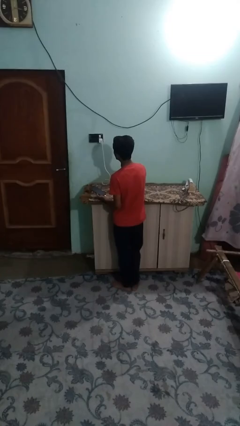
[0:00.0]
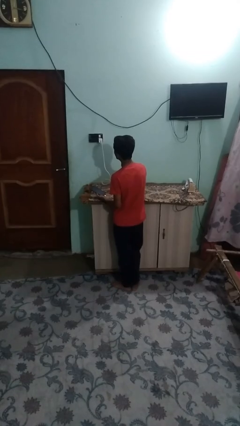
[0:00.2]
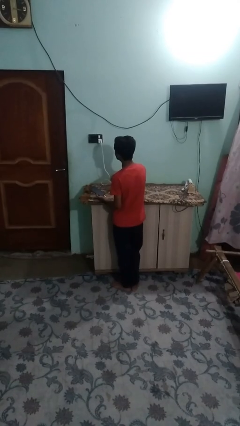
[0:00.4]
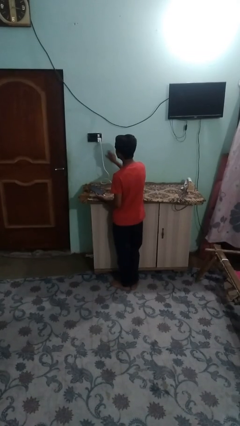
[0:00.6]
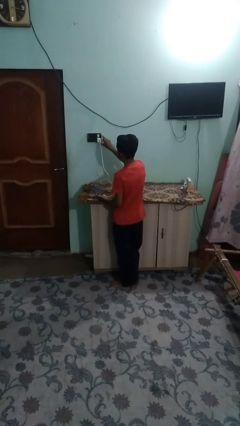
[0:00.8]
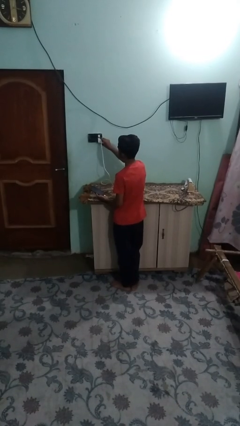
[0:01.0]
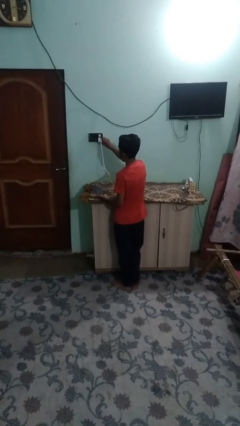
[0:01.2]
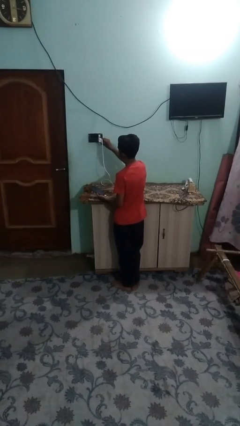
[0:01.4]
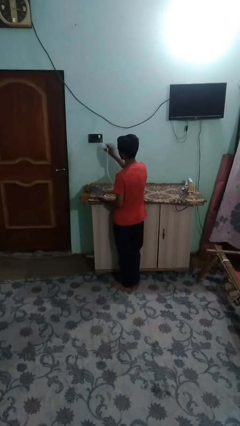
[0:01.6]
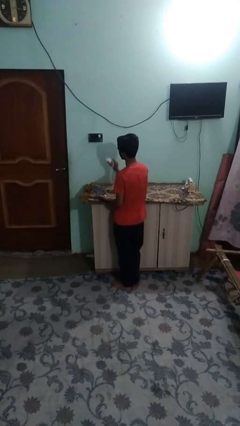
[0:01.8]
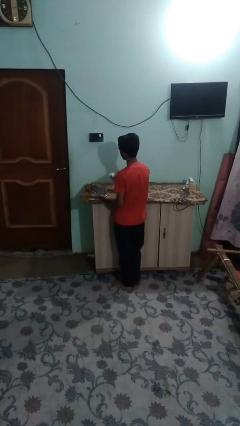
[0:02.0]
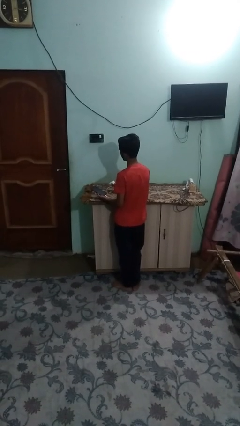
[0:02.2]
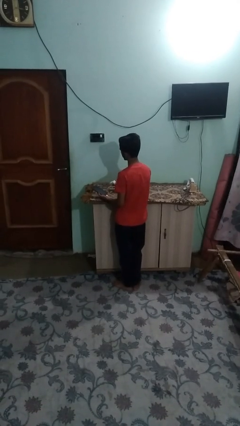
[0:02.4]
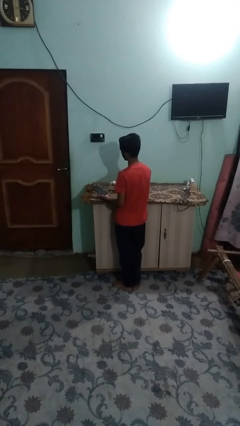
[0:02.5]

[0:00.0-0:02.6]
person unplugs from electrical socket

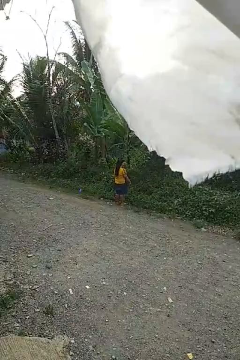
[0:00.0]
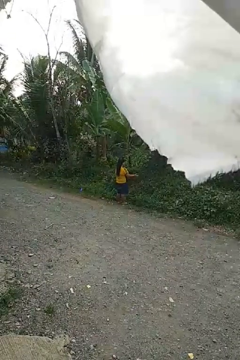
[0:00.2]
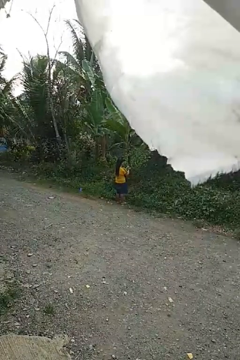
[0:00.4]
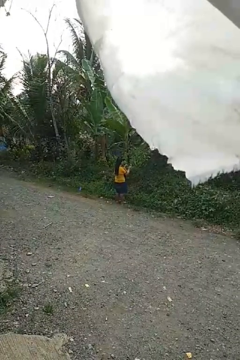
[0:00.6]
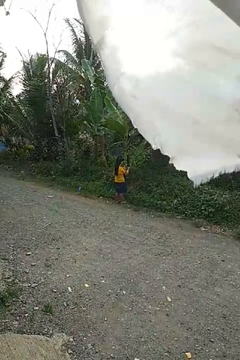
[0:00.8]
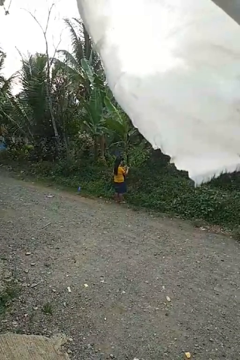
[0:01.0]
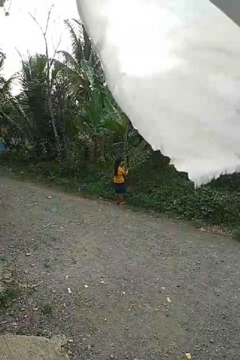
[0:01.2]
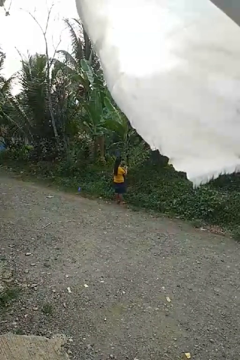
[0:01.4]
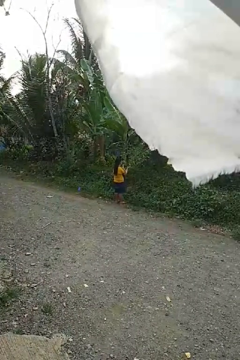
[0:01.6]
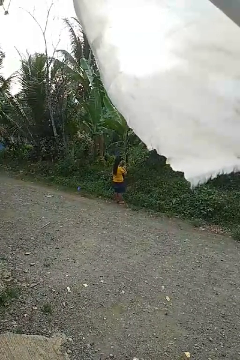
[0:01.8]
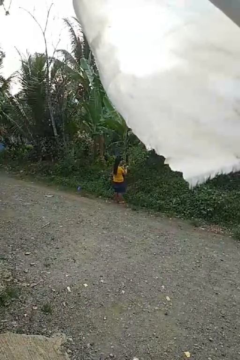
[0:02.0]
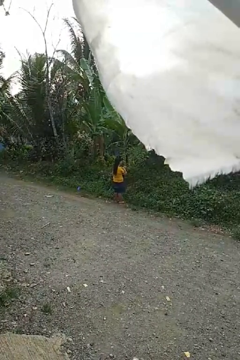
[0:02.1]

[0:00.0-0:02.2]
person claps hands

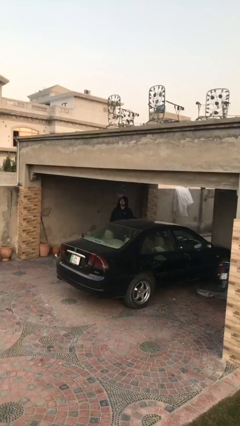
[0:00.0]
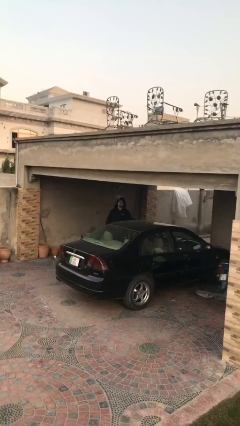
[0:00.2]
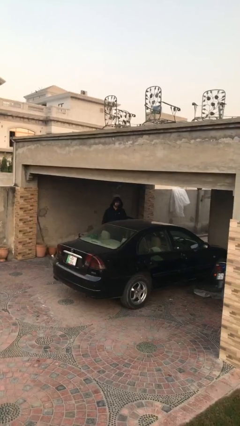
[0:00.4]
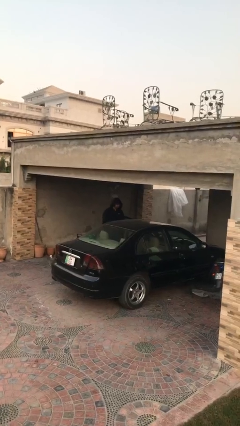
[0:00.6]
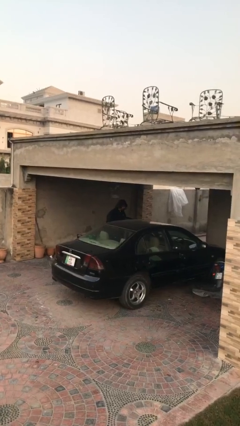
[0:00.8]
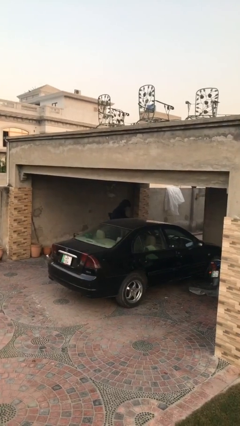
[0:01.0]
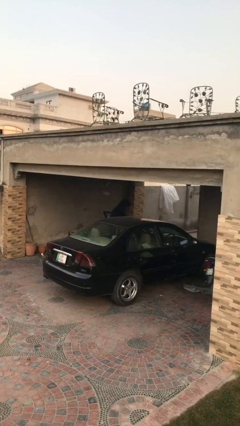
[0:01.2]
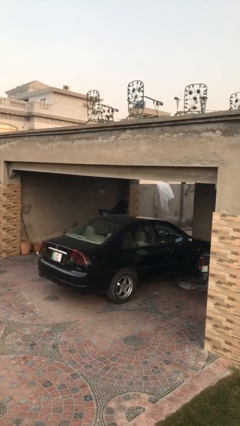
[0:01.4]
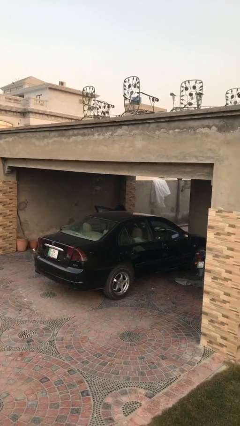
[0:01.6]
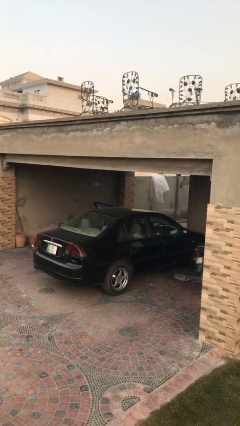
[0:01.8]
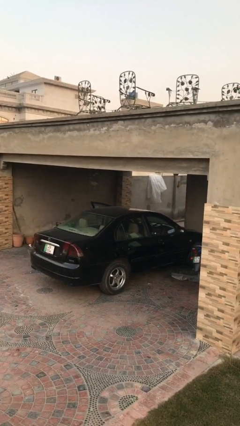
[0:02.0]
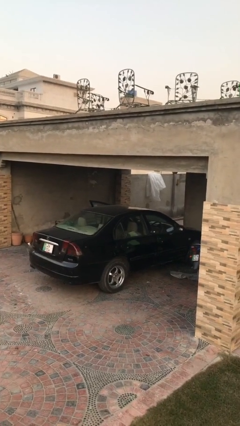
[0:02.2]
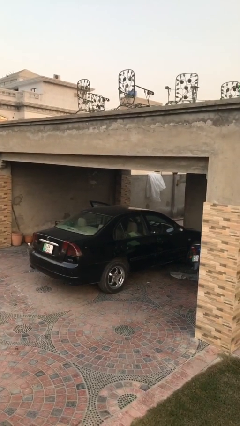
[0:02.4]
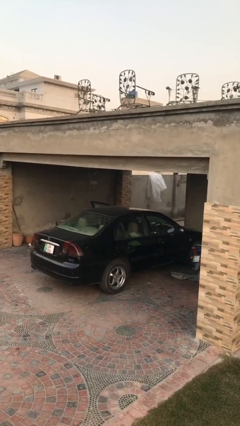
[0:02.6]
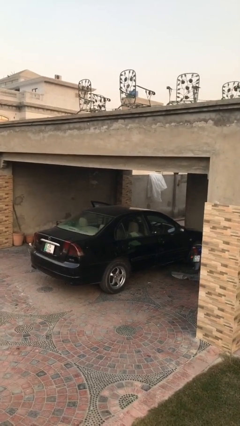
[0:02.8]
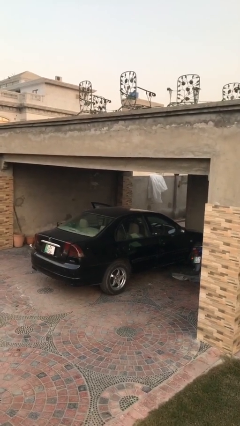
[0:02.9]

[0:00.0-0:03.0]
person enters car

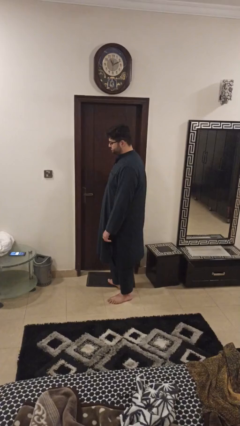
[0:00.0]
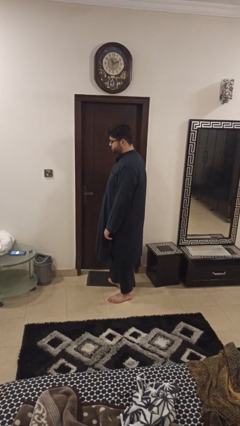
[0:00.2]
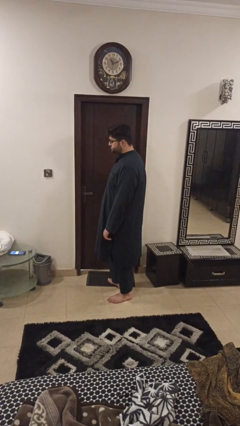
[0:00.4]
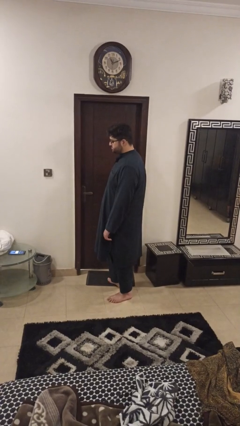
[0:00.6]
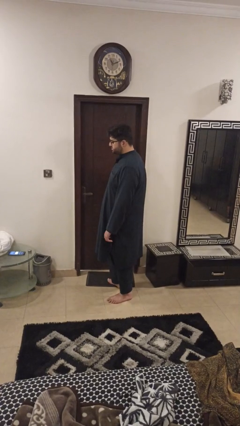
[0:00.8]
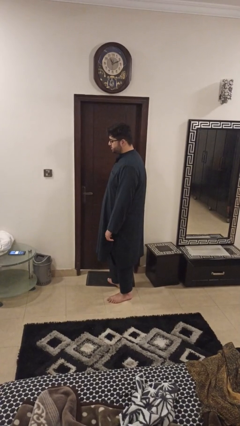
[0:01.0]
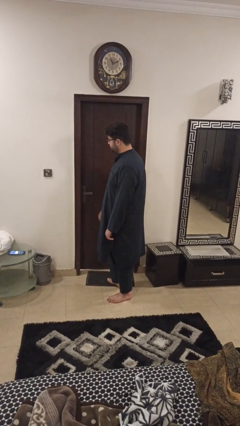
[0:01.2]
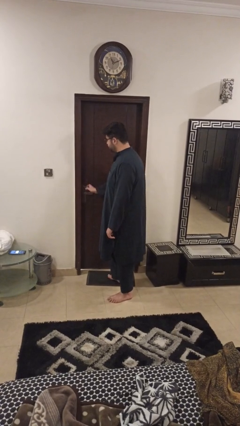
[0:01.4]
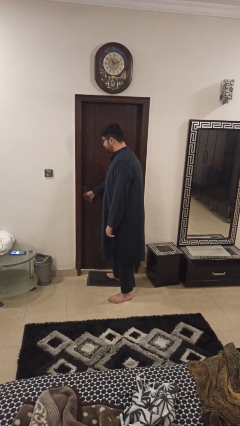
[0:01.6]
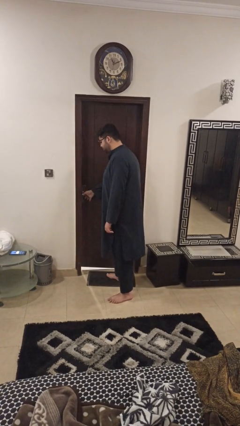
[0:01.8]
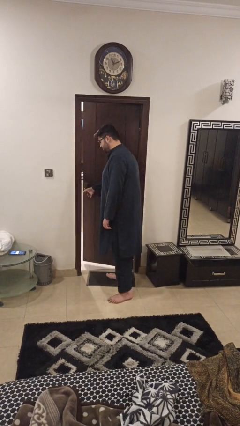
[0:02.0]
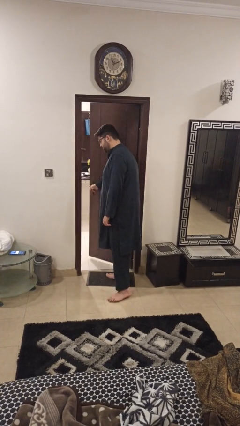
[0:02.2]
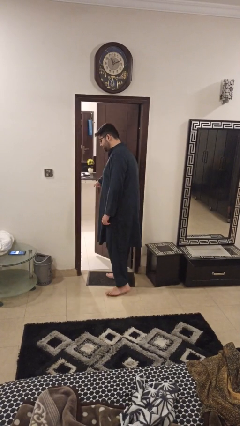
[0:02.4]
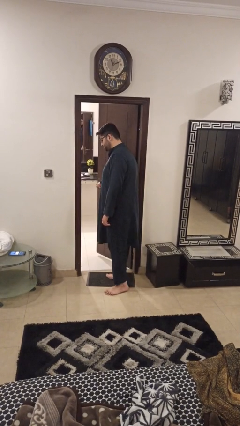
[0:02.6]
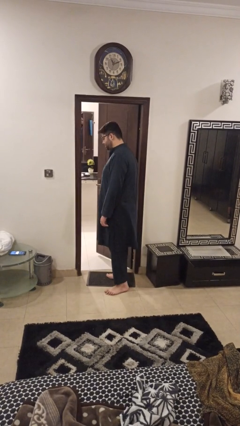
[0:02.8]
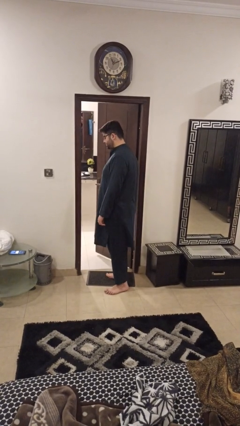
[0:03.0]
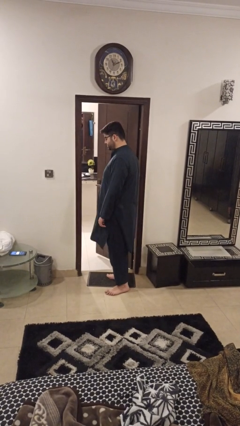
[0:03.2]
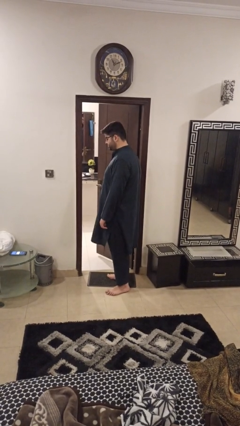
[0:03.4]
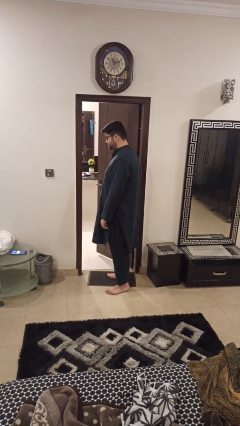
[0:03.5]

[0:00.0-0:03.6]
person opens facility door

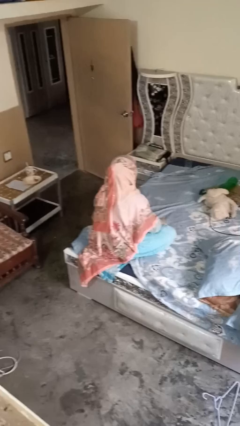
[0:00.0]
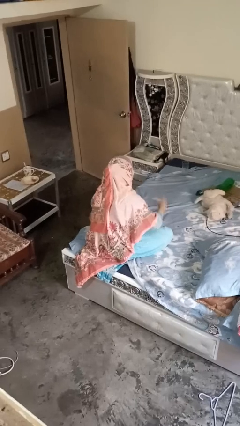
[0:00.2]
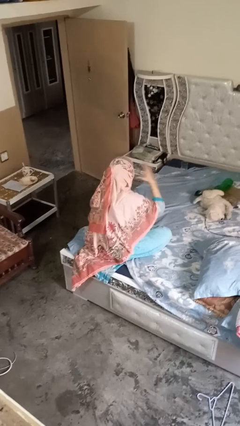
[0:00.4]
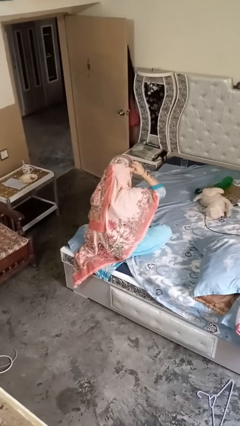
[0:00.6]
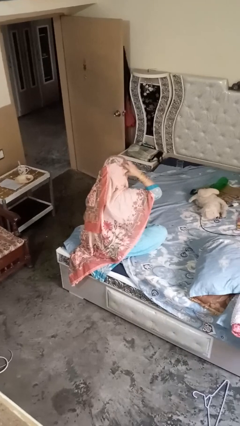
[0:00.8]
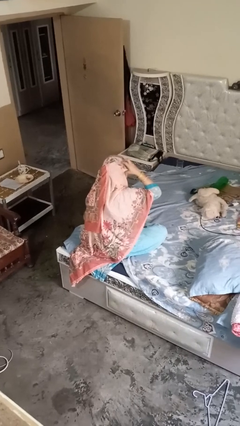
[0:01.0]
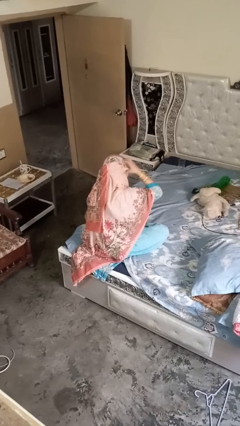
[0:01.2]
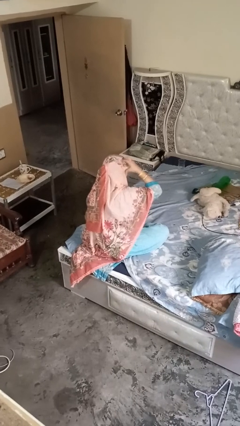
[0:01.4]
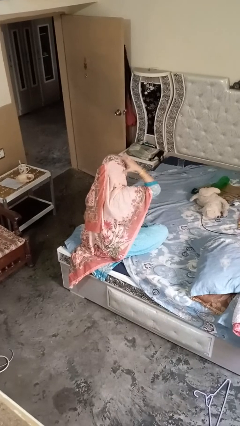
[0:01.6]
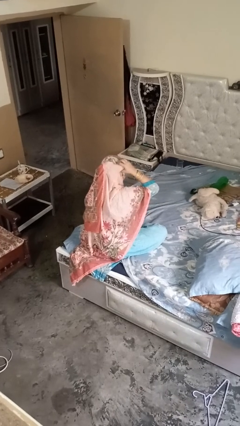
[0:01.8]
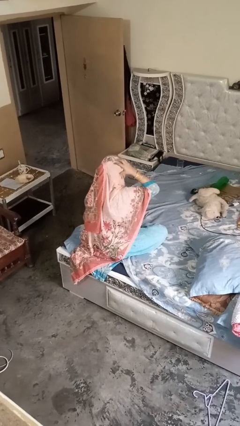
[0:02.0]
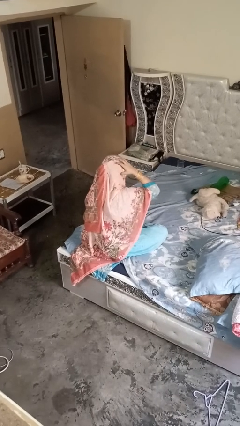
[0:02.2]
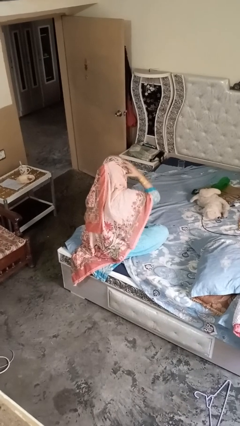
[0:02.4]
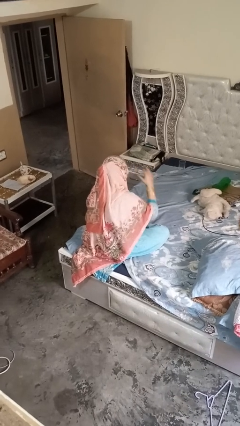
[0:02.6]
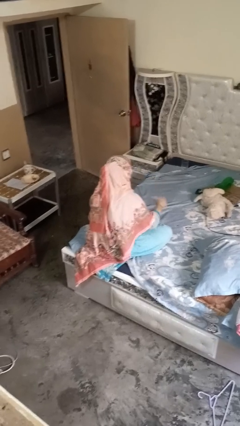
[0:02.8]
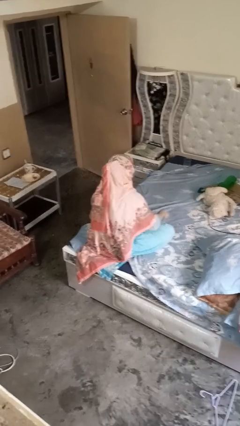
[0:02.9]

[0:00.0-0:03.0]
person strokes hair

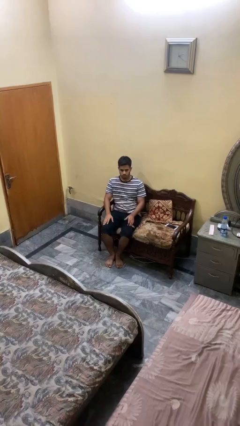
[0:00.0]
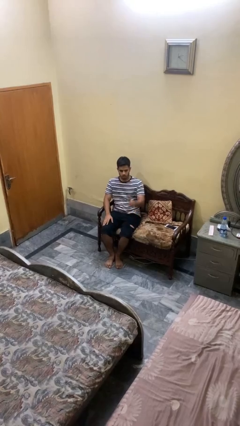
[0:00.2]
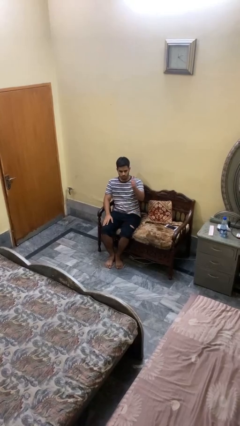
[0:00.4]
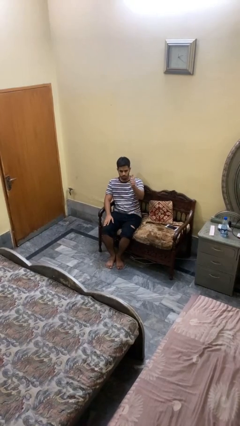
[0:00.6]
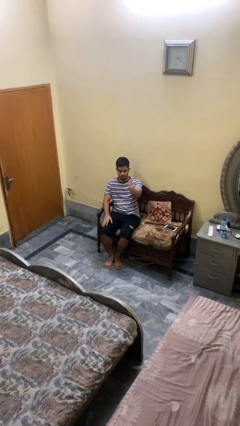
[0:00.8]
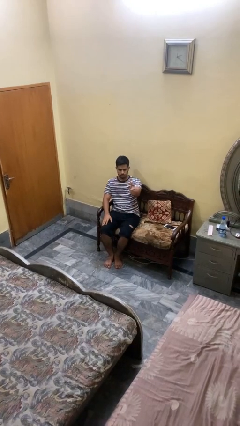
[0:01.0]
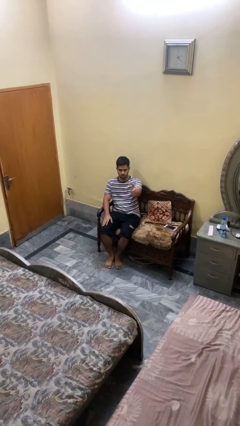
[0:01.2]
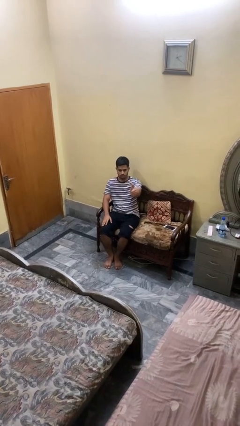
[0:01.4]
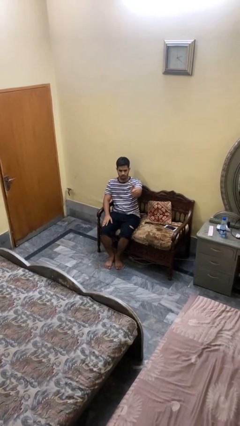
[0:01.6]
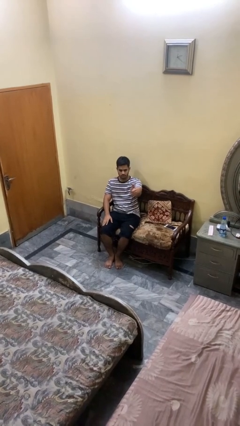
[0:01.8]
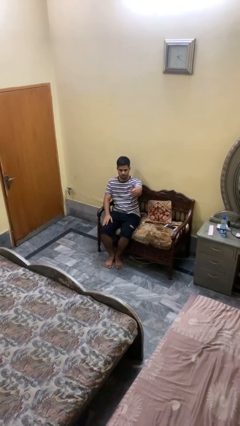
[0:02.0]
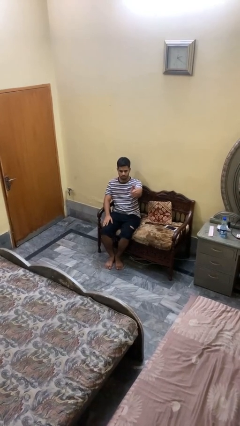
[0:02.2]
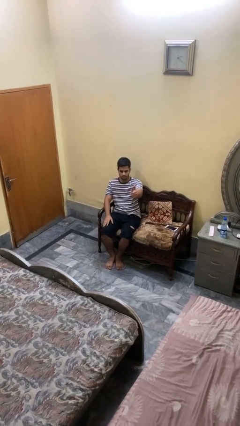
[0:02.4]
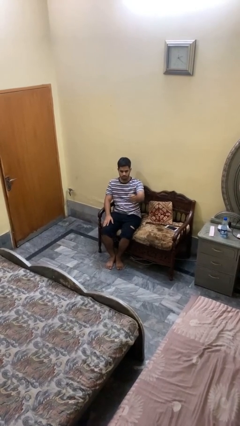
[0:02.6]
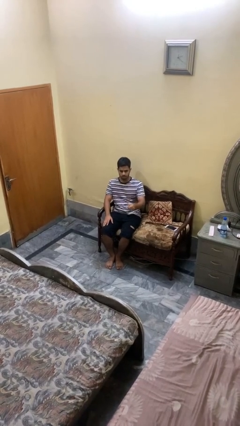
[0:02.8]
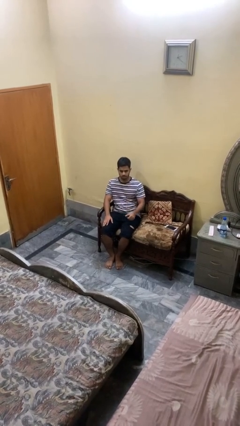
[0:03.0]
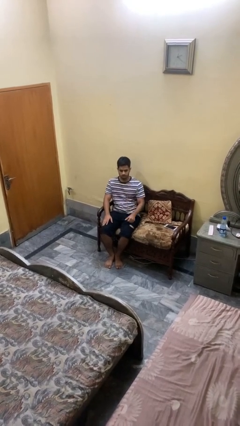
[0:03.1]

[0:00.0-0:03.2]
person gestures thumbs up
